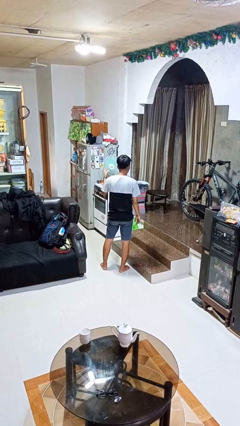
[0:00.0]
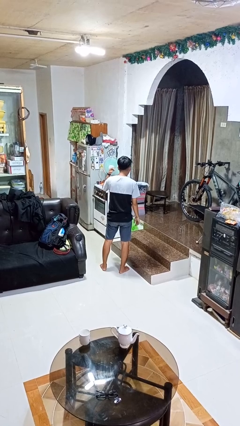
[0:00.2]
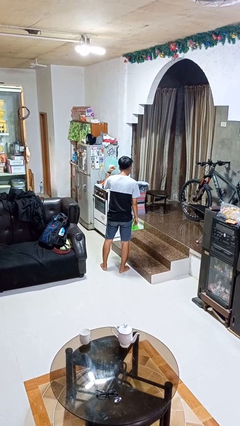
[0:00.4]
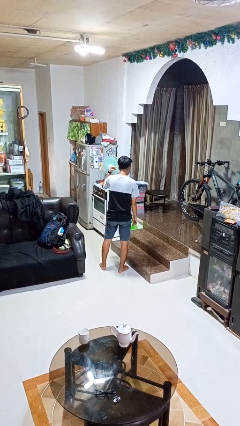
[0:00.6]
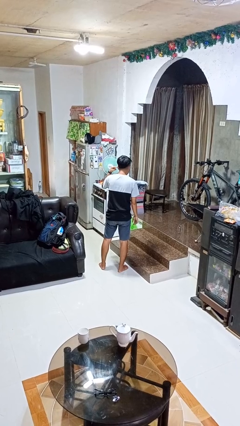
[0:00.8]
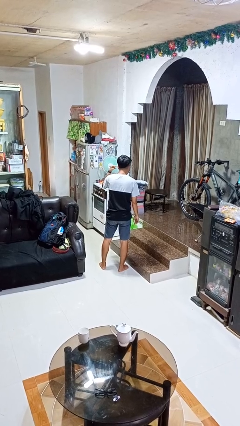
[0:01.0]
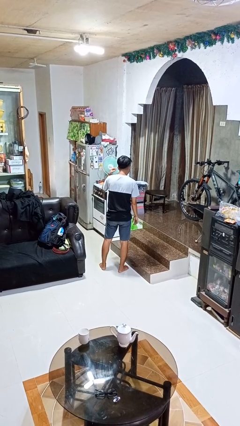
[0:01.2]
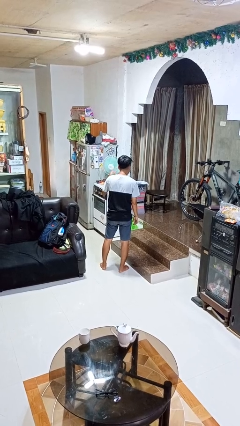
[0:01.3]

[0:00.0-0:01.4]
person gestures listen closely

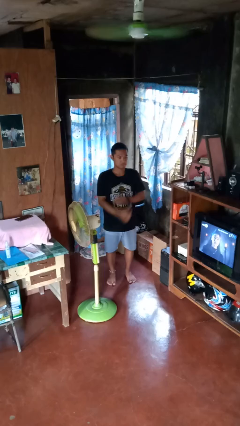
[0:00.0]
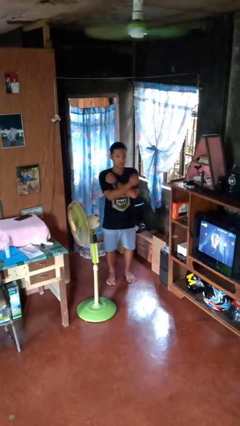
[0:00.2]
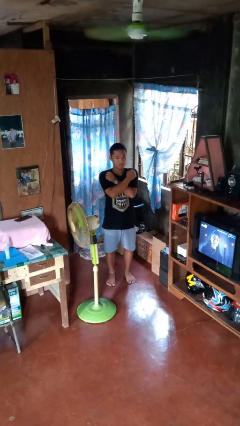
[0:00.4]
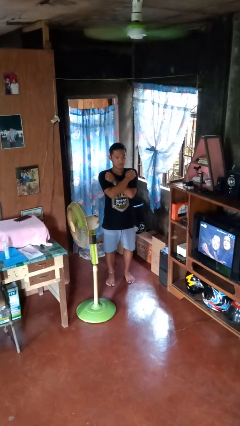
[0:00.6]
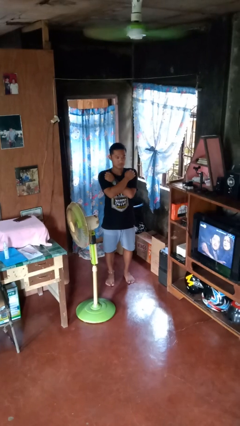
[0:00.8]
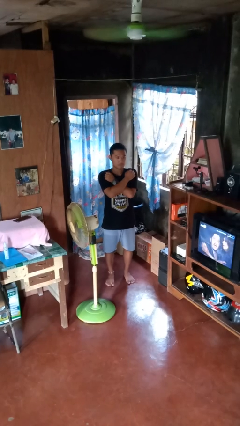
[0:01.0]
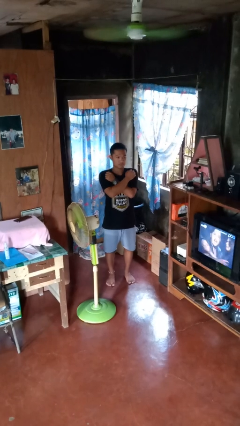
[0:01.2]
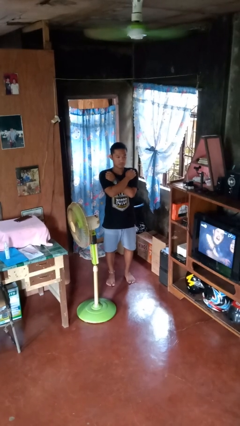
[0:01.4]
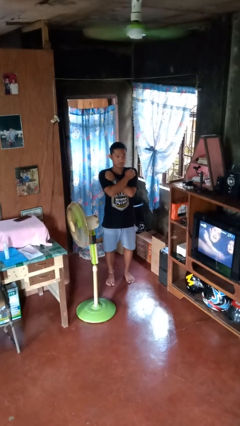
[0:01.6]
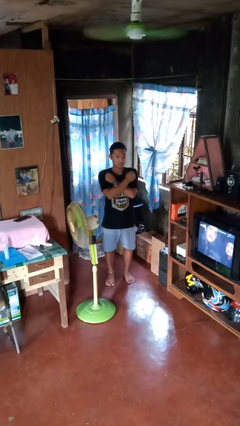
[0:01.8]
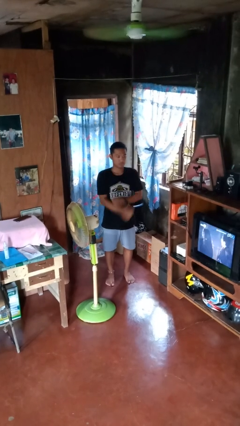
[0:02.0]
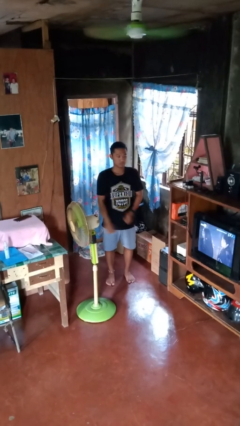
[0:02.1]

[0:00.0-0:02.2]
person gestures arms x

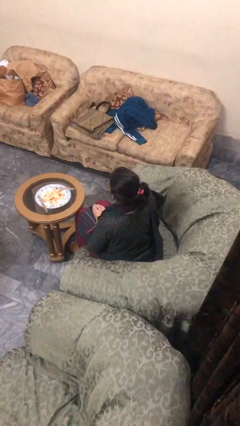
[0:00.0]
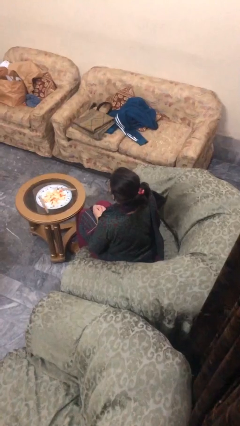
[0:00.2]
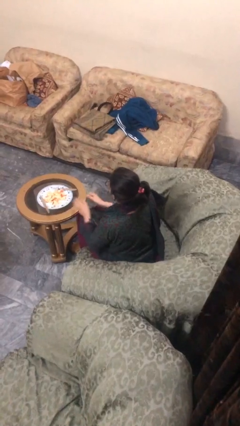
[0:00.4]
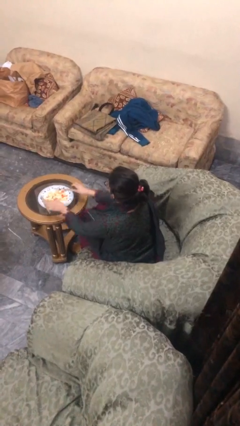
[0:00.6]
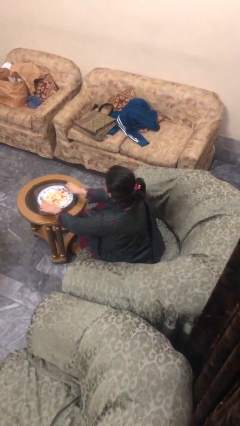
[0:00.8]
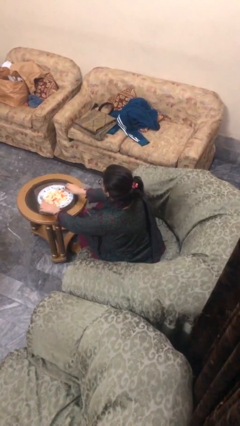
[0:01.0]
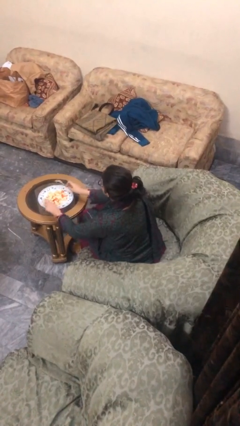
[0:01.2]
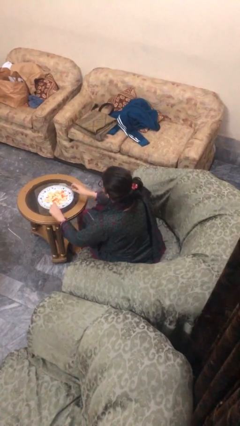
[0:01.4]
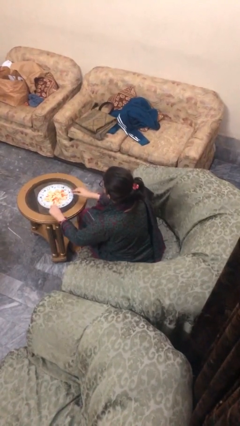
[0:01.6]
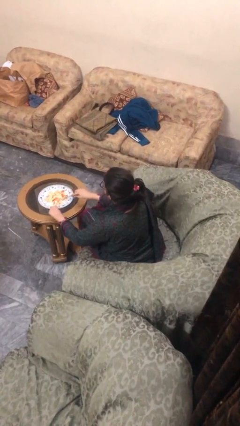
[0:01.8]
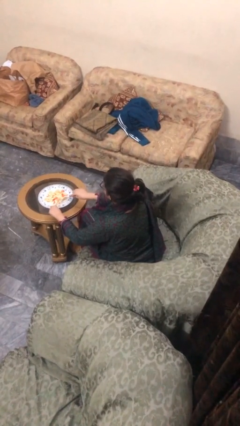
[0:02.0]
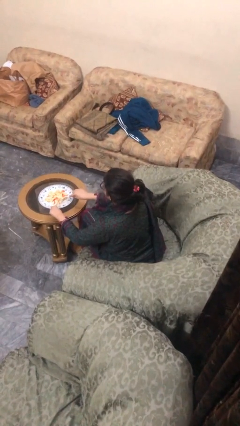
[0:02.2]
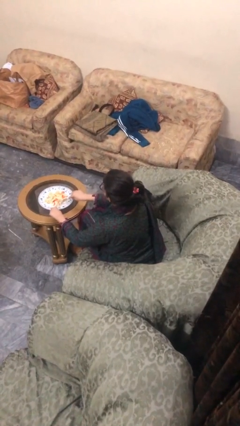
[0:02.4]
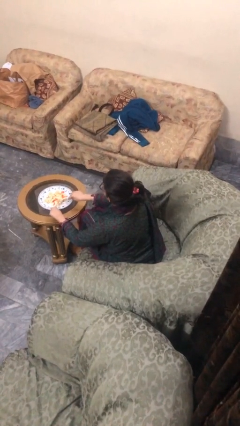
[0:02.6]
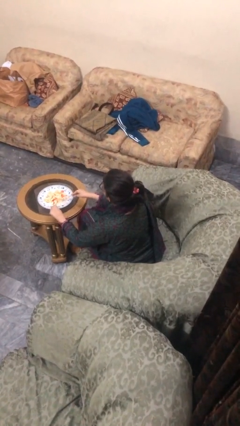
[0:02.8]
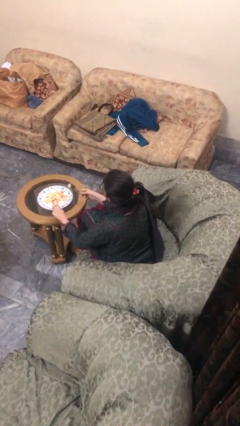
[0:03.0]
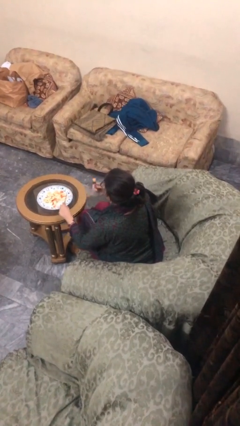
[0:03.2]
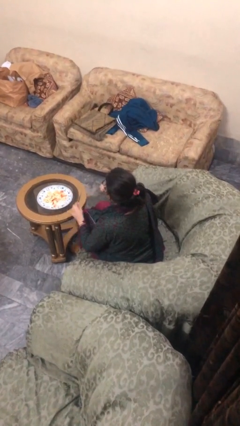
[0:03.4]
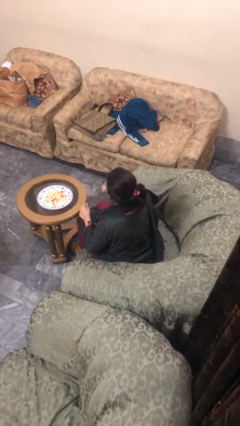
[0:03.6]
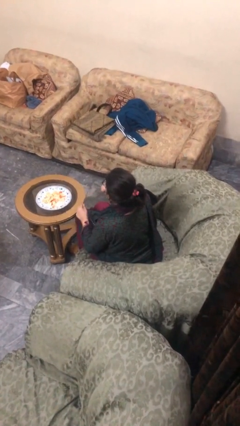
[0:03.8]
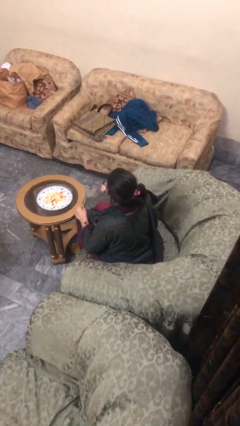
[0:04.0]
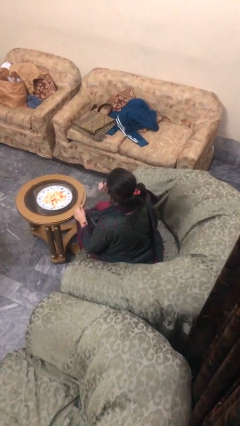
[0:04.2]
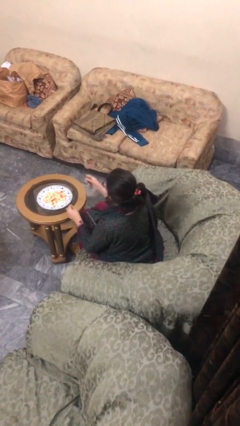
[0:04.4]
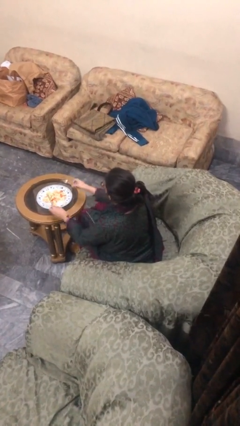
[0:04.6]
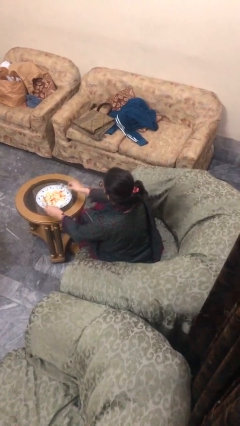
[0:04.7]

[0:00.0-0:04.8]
person eats with utensil

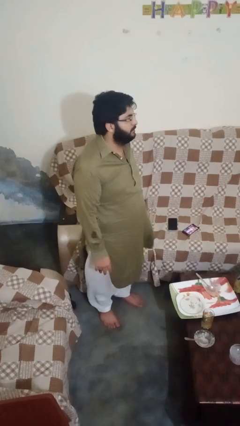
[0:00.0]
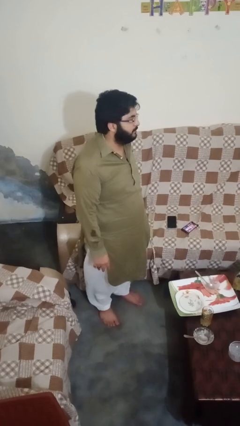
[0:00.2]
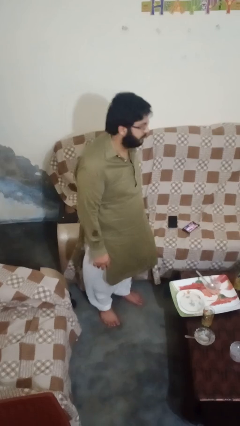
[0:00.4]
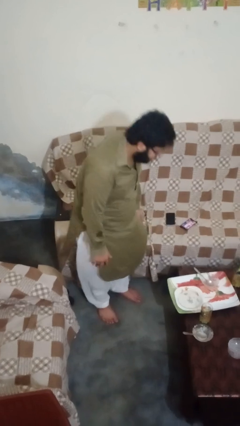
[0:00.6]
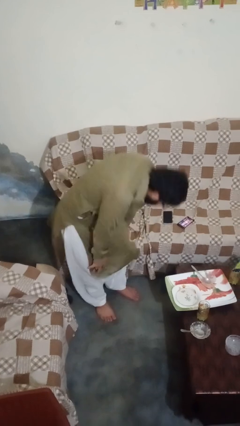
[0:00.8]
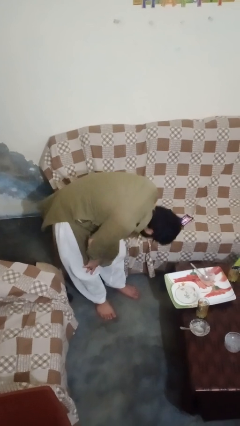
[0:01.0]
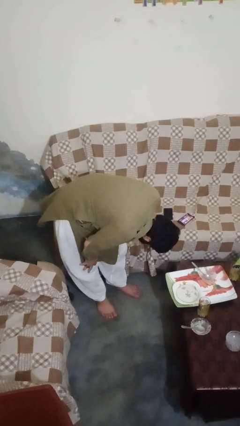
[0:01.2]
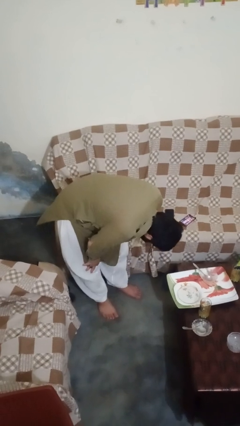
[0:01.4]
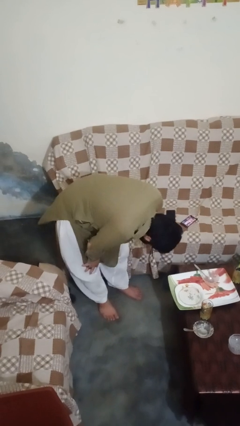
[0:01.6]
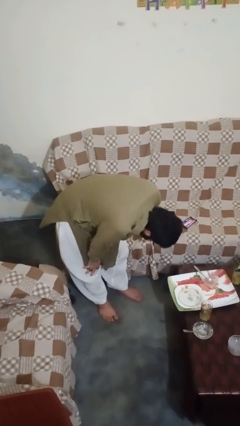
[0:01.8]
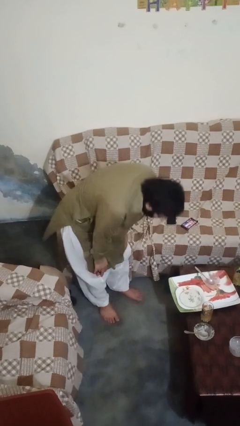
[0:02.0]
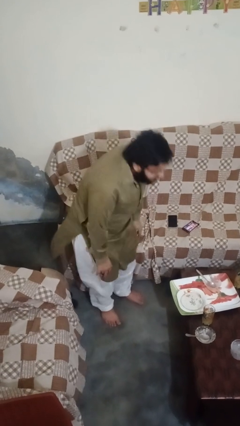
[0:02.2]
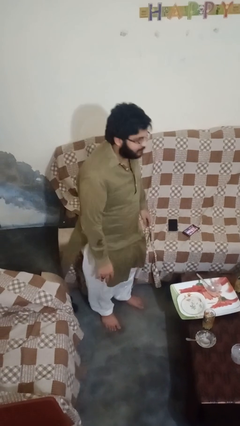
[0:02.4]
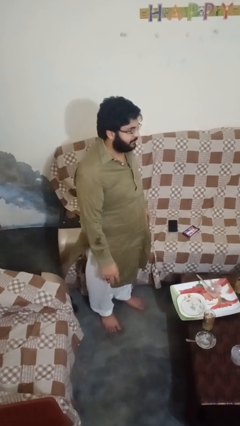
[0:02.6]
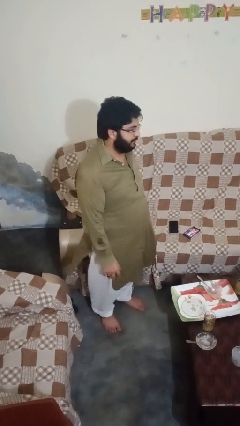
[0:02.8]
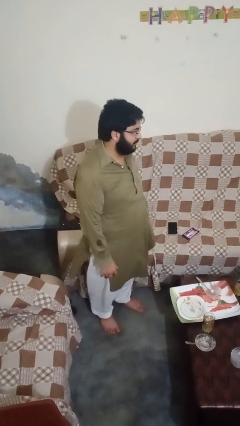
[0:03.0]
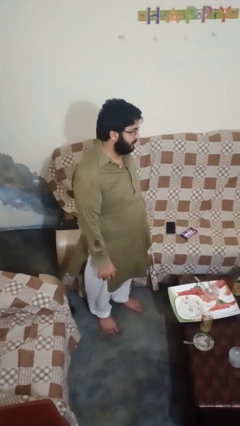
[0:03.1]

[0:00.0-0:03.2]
person bows

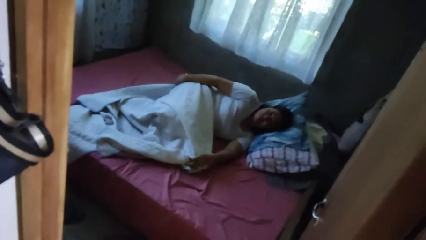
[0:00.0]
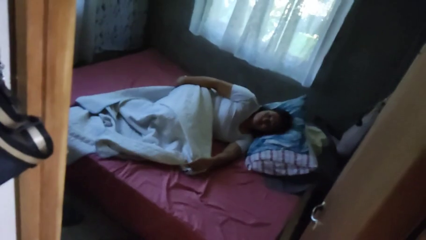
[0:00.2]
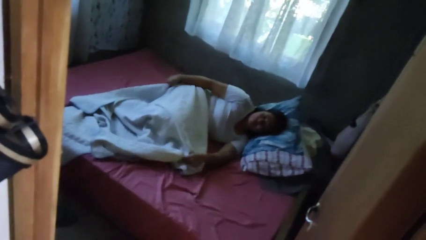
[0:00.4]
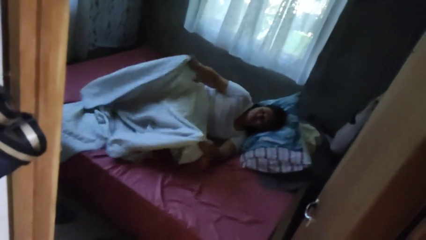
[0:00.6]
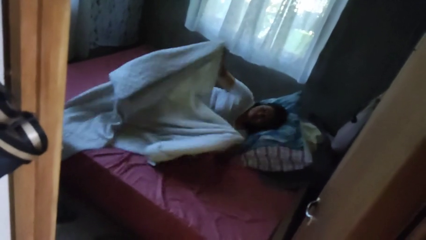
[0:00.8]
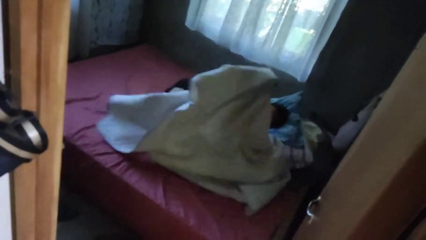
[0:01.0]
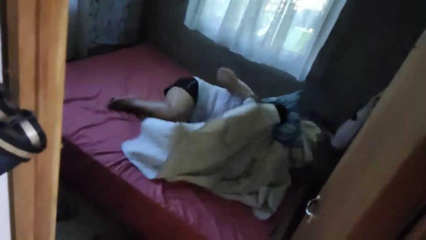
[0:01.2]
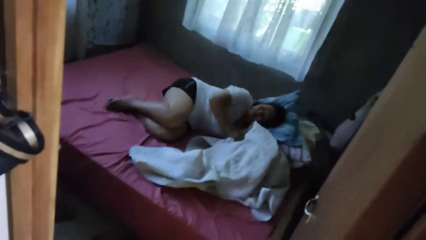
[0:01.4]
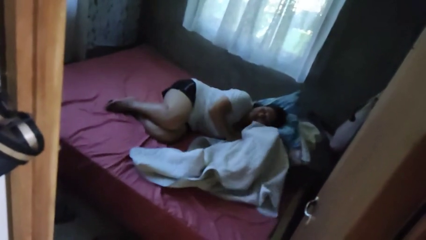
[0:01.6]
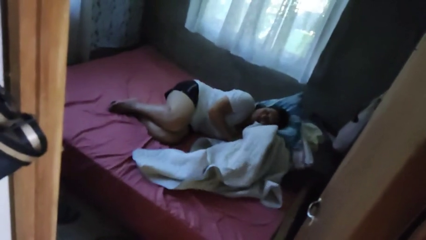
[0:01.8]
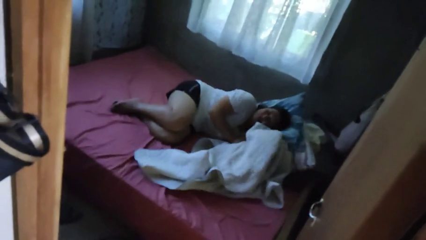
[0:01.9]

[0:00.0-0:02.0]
person uncovers with bedsheets

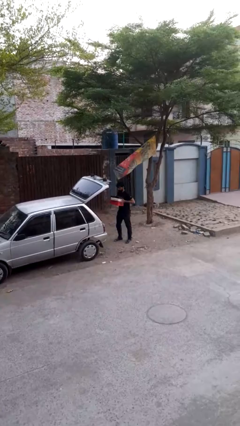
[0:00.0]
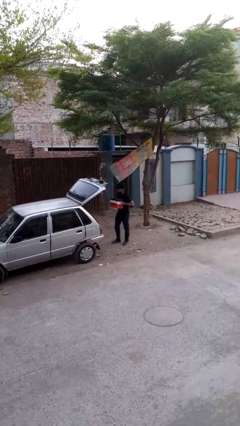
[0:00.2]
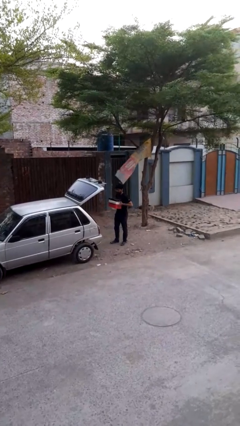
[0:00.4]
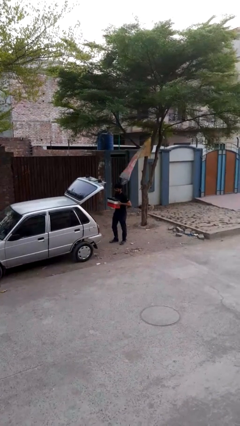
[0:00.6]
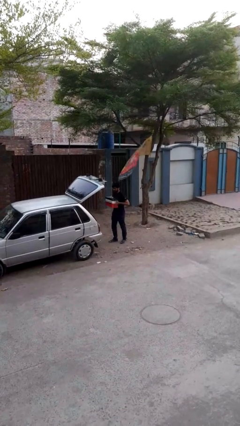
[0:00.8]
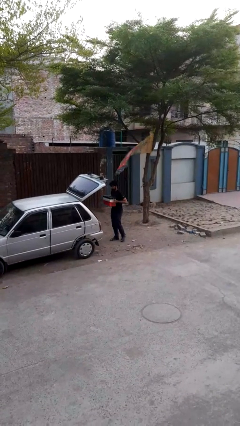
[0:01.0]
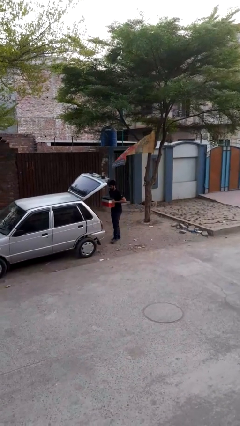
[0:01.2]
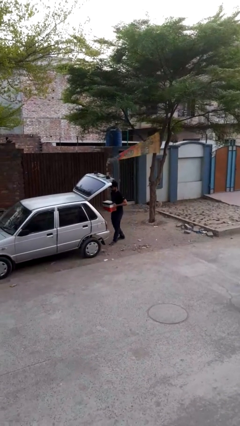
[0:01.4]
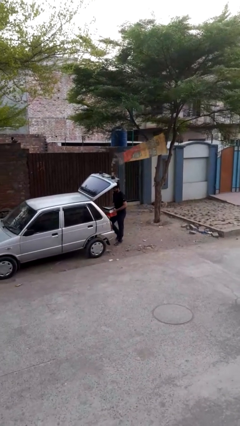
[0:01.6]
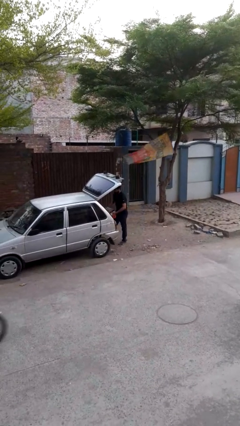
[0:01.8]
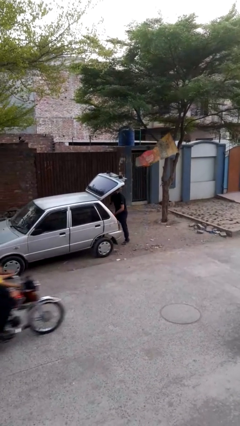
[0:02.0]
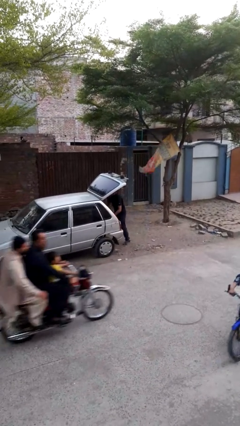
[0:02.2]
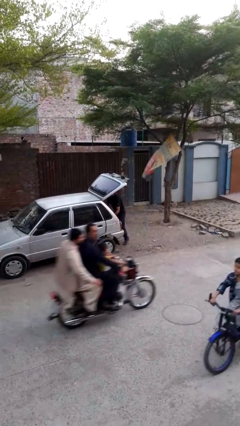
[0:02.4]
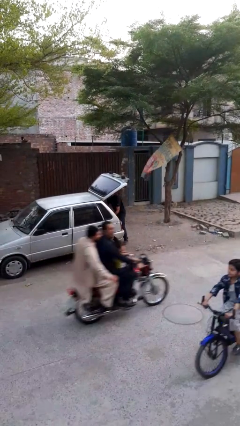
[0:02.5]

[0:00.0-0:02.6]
person loads car

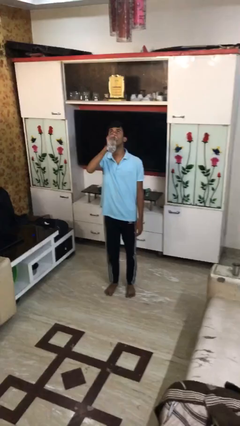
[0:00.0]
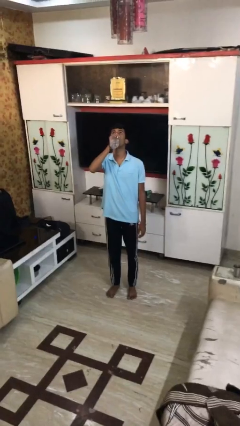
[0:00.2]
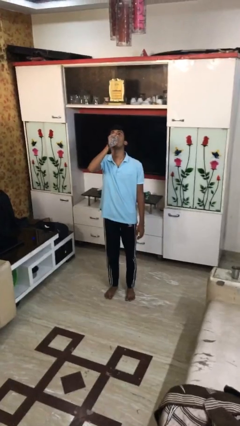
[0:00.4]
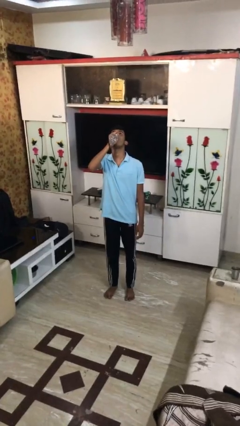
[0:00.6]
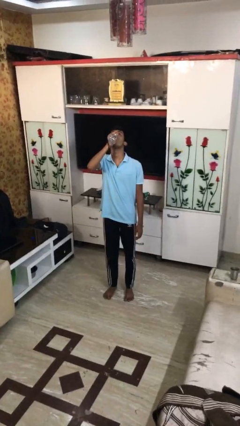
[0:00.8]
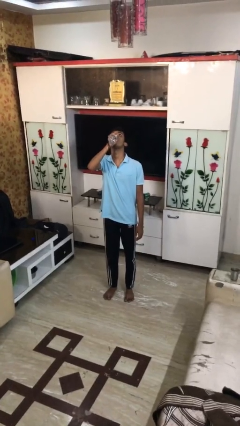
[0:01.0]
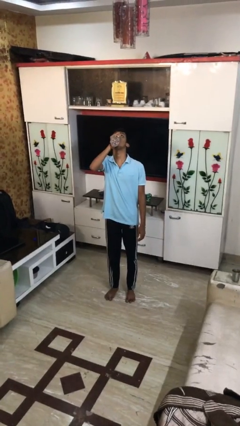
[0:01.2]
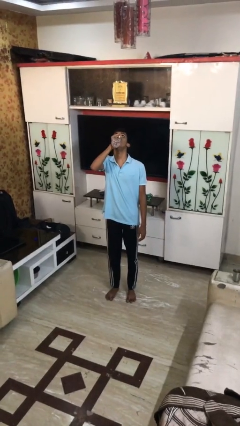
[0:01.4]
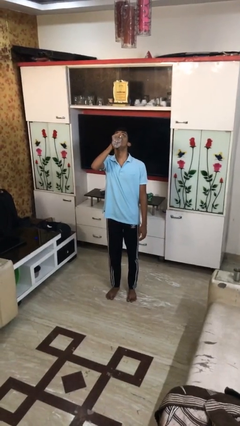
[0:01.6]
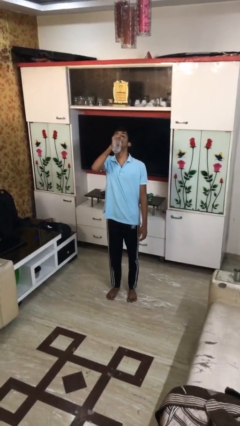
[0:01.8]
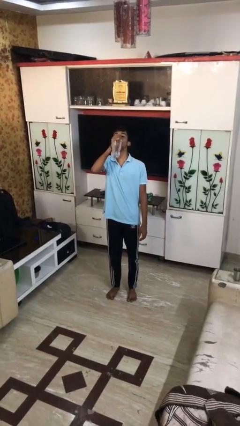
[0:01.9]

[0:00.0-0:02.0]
person drinks from bottle
